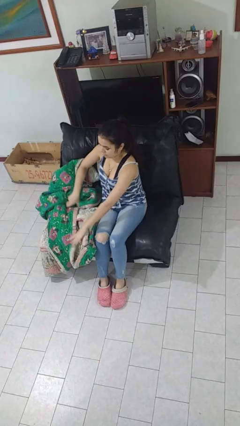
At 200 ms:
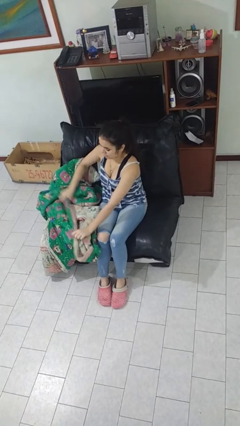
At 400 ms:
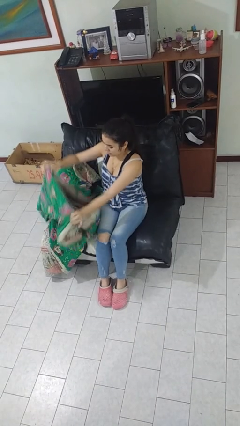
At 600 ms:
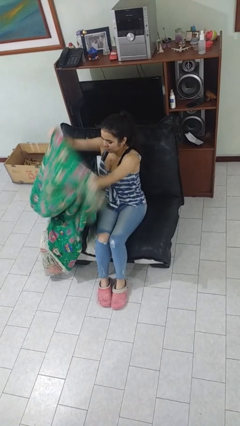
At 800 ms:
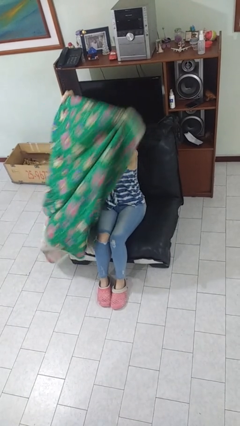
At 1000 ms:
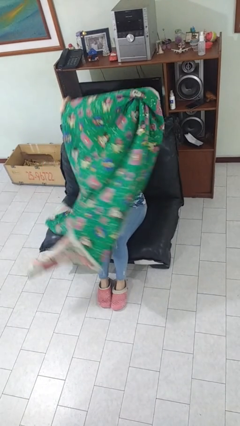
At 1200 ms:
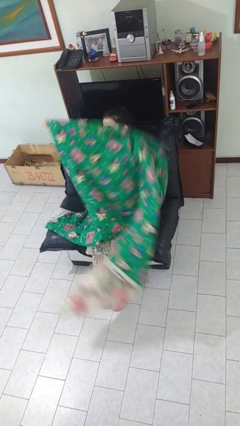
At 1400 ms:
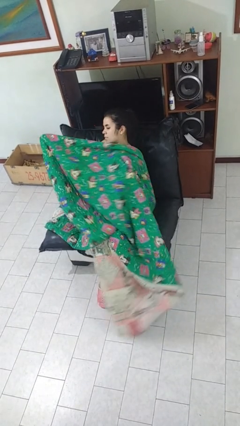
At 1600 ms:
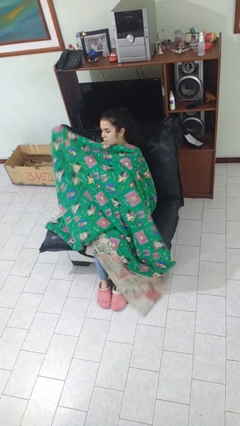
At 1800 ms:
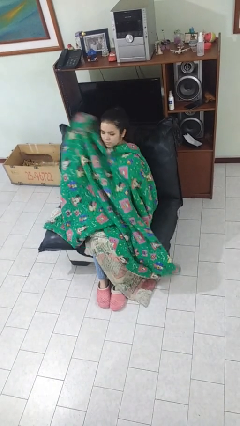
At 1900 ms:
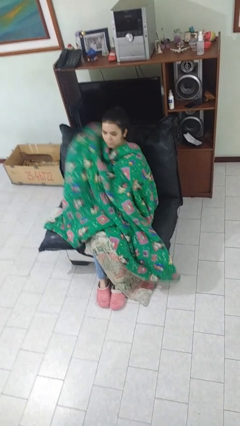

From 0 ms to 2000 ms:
person covers with blanket

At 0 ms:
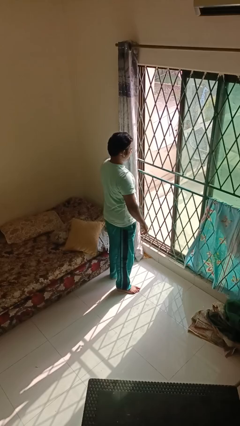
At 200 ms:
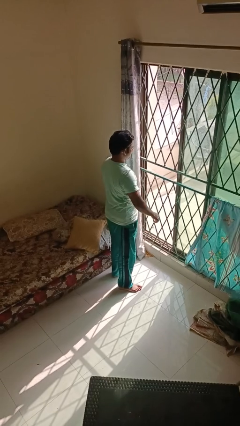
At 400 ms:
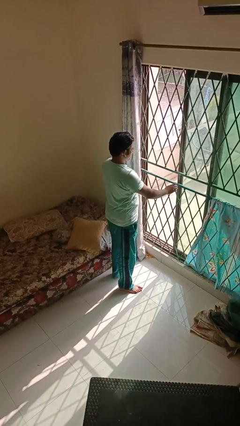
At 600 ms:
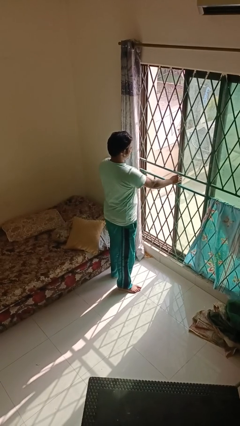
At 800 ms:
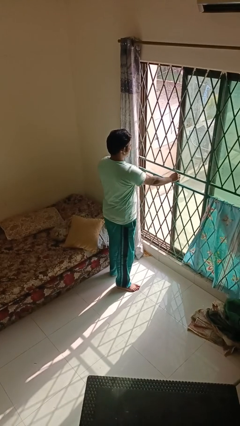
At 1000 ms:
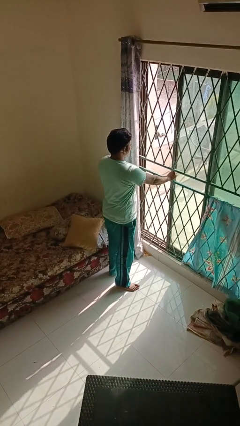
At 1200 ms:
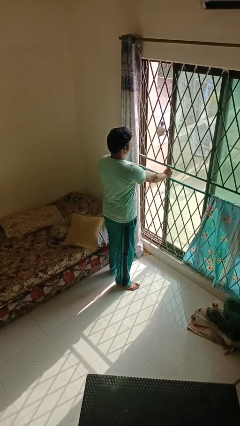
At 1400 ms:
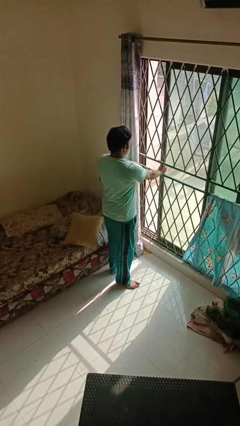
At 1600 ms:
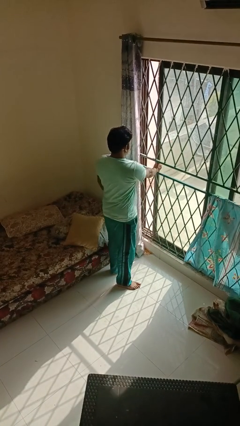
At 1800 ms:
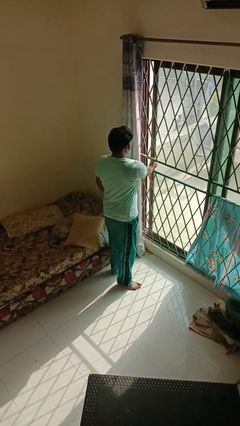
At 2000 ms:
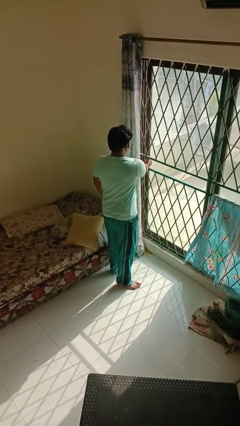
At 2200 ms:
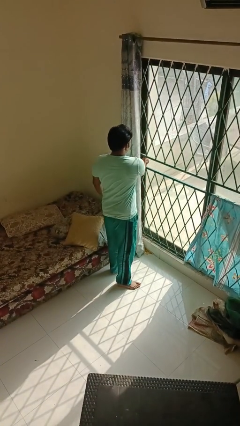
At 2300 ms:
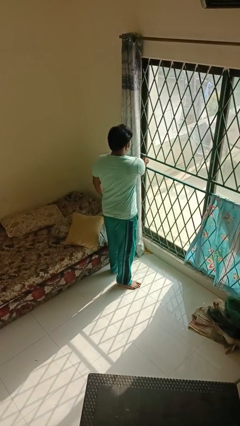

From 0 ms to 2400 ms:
person closes home window

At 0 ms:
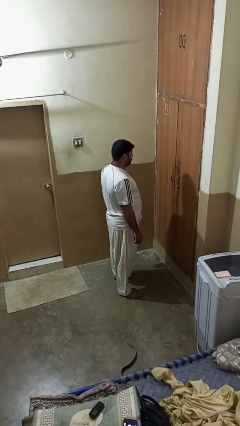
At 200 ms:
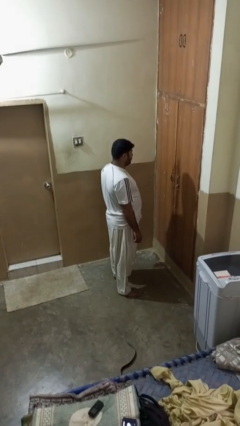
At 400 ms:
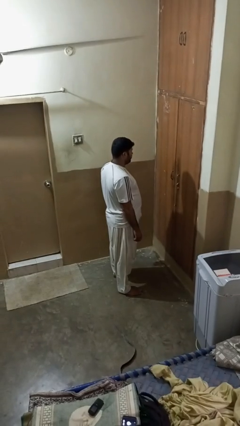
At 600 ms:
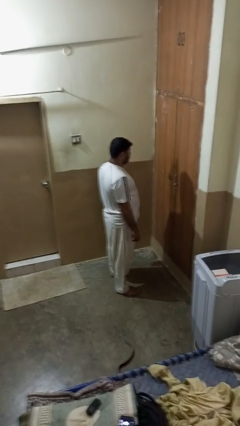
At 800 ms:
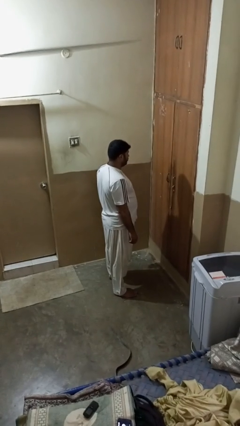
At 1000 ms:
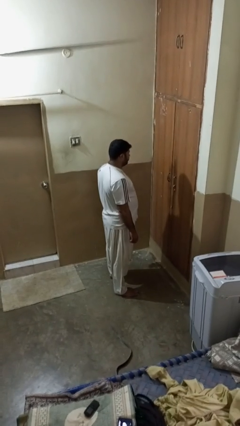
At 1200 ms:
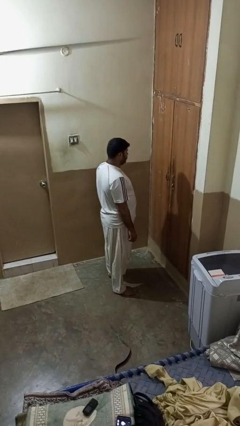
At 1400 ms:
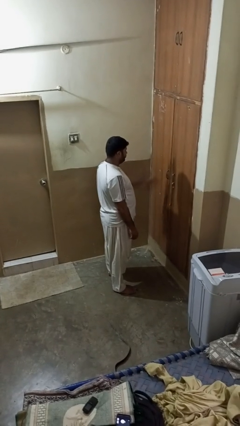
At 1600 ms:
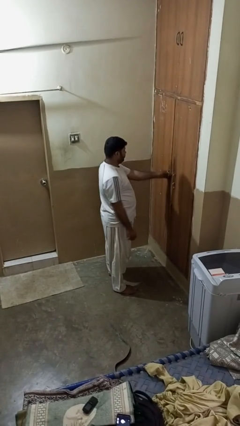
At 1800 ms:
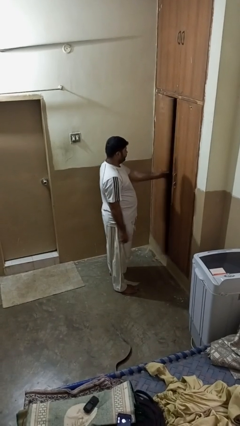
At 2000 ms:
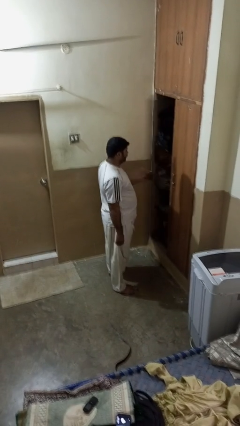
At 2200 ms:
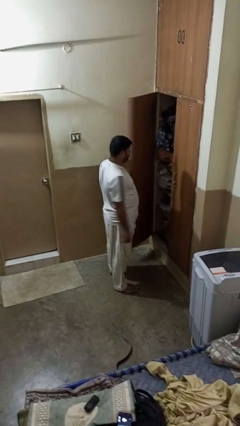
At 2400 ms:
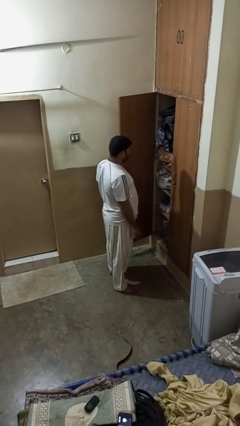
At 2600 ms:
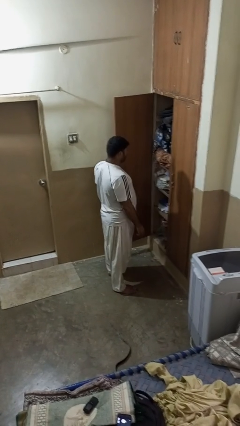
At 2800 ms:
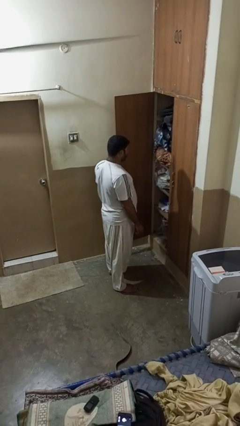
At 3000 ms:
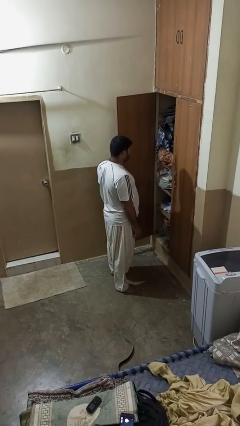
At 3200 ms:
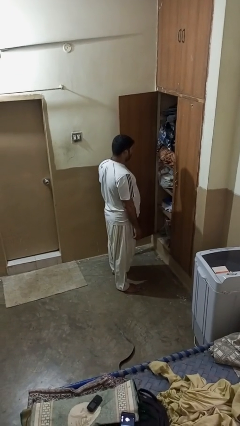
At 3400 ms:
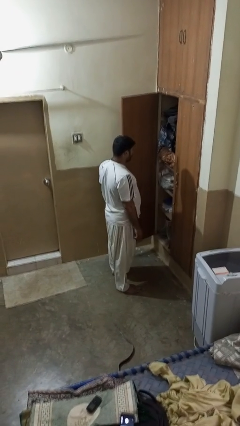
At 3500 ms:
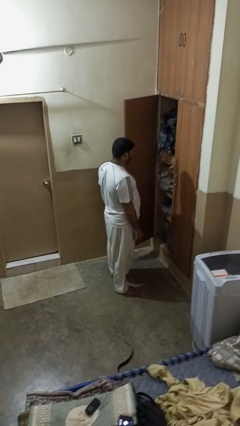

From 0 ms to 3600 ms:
person opens closet door

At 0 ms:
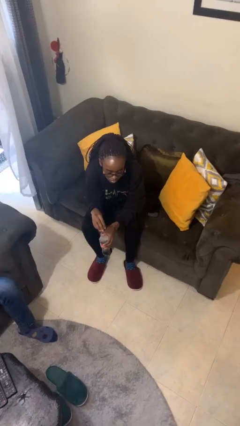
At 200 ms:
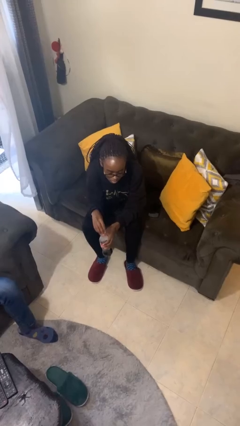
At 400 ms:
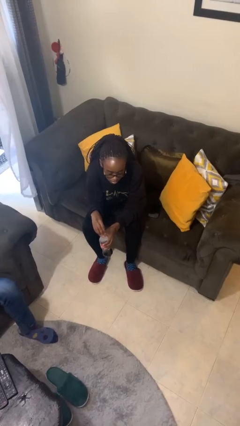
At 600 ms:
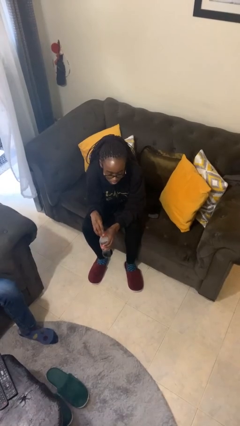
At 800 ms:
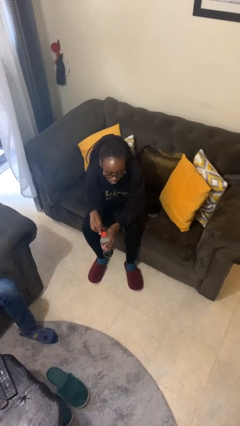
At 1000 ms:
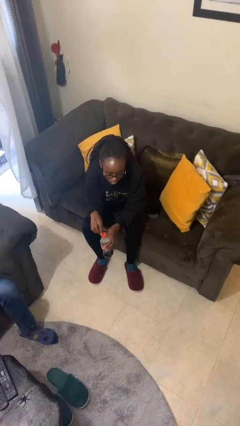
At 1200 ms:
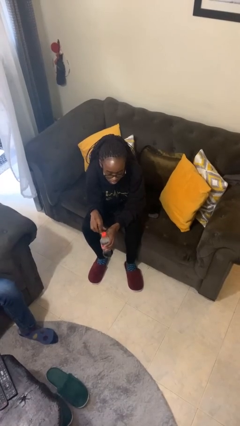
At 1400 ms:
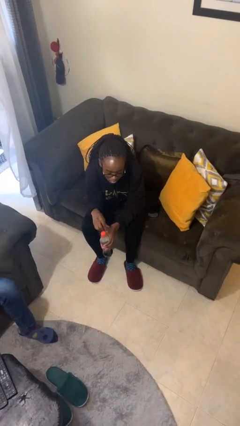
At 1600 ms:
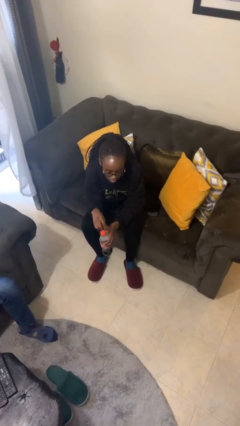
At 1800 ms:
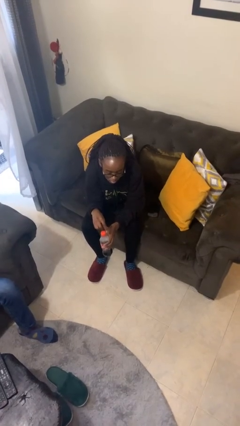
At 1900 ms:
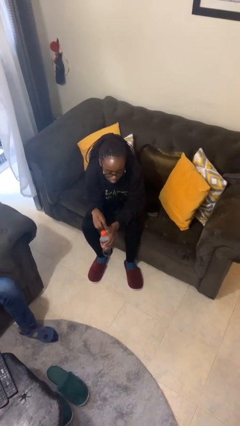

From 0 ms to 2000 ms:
person screws lid to bottle

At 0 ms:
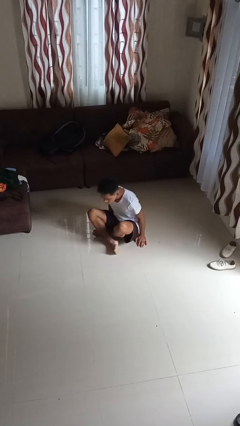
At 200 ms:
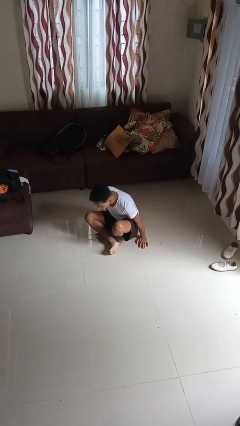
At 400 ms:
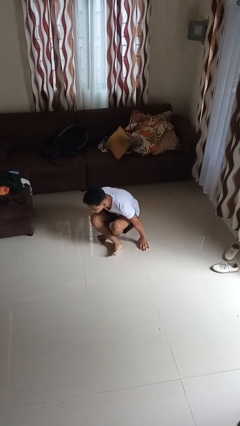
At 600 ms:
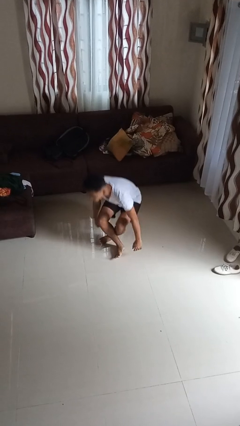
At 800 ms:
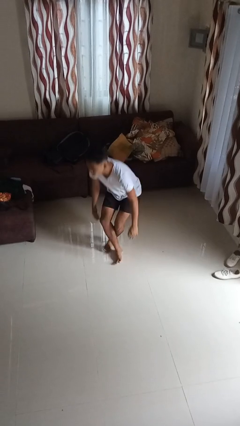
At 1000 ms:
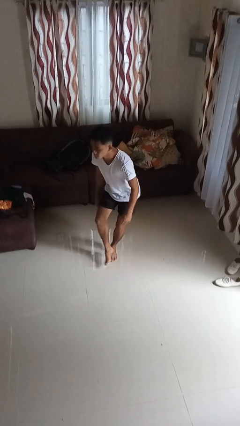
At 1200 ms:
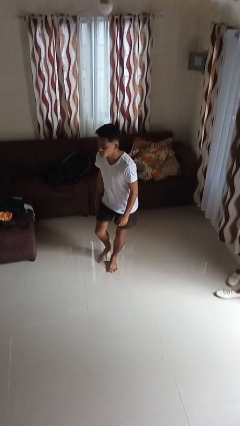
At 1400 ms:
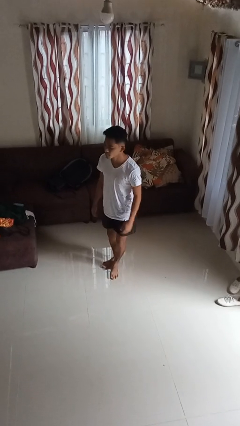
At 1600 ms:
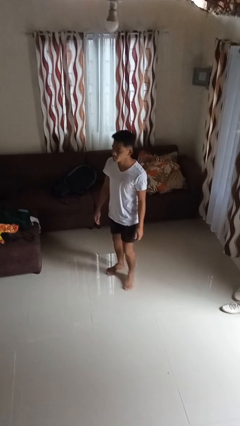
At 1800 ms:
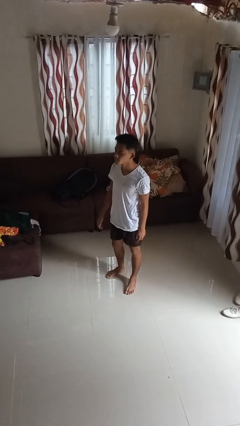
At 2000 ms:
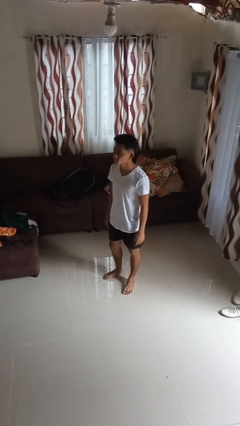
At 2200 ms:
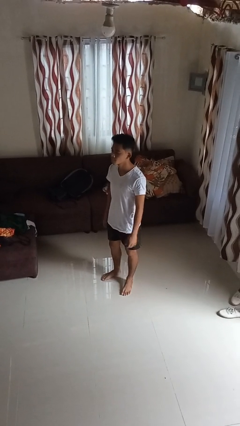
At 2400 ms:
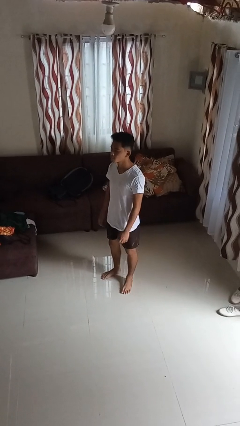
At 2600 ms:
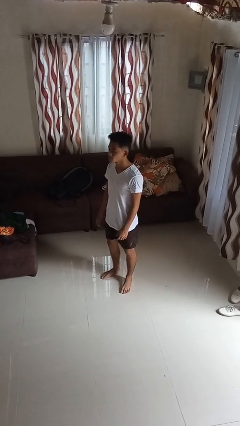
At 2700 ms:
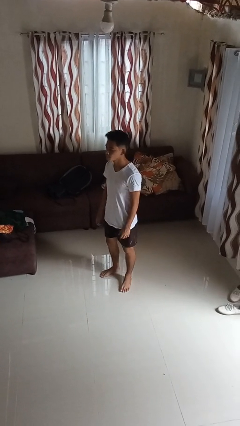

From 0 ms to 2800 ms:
person stands up from floor

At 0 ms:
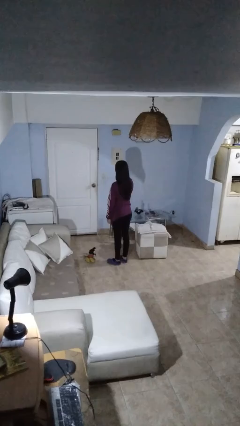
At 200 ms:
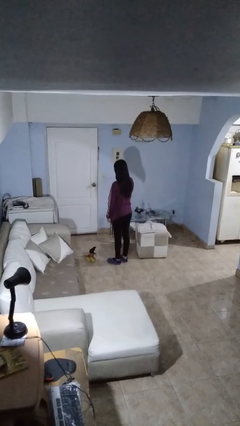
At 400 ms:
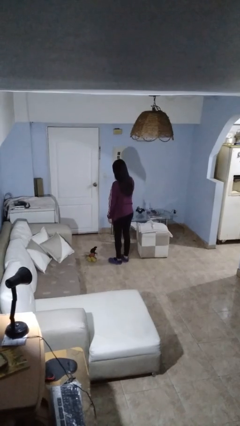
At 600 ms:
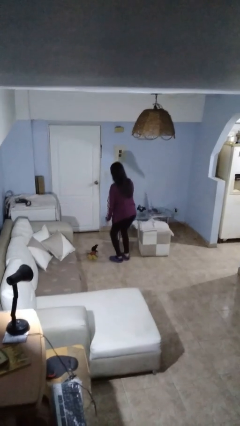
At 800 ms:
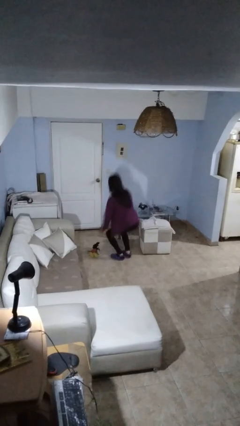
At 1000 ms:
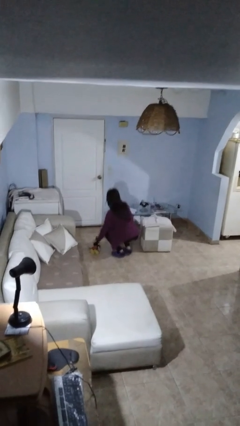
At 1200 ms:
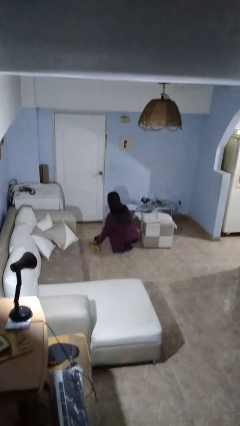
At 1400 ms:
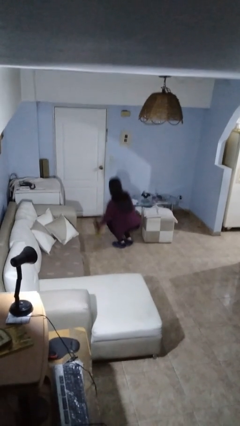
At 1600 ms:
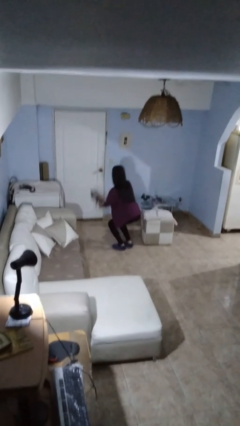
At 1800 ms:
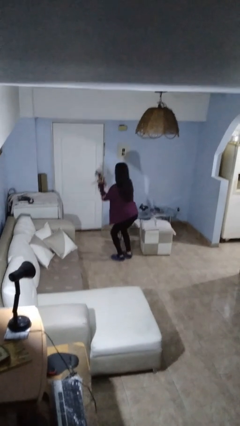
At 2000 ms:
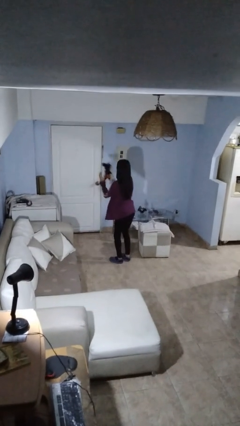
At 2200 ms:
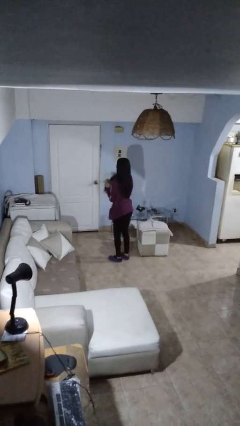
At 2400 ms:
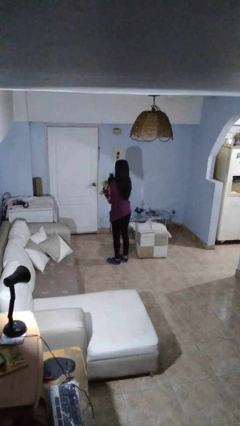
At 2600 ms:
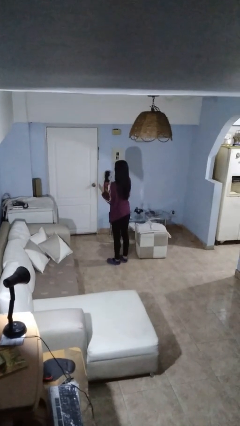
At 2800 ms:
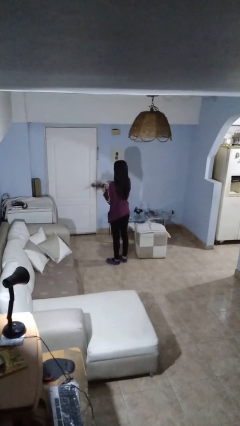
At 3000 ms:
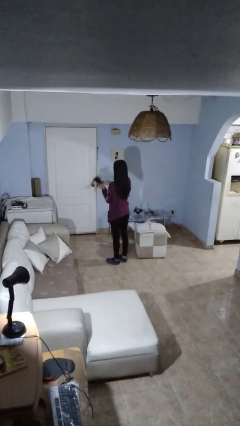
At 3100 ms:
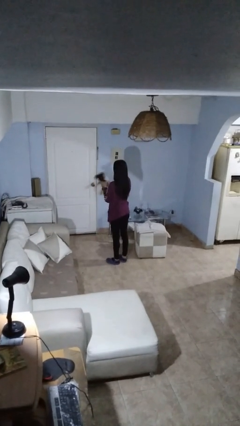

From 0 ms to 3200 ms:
person picks up object from floor

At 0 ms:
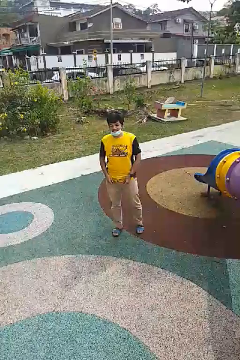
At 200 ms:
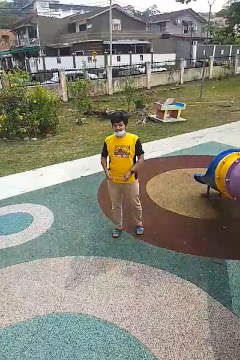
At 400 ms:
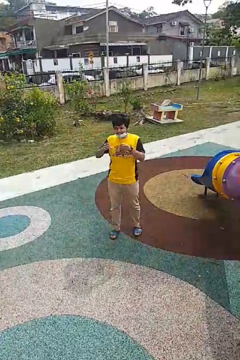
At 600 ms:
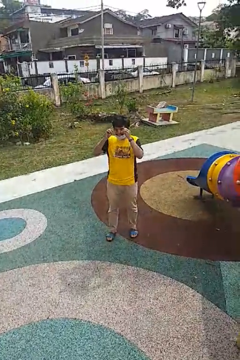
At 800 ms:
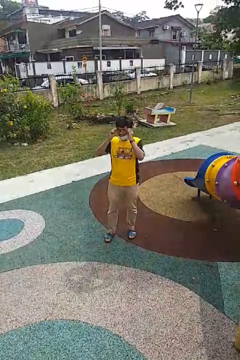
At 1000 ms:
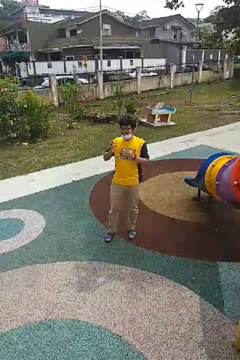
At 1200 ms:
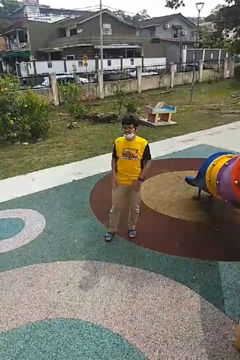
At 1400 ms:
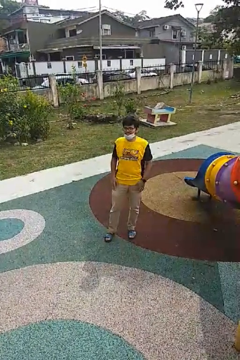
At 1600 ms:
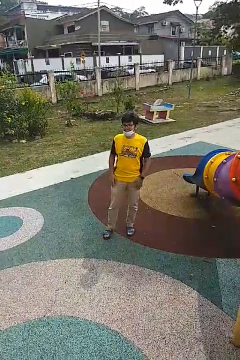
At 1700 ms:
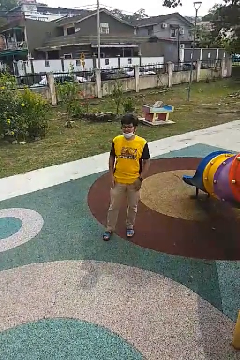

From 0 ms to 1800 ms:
person puts on glasses
